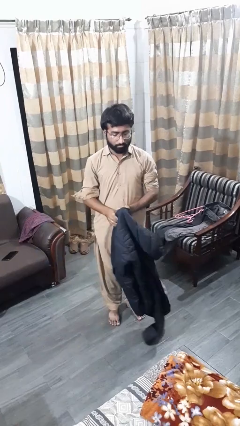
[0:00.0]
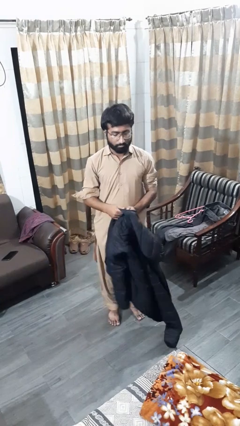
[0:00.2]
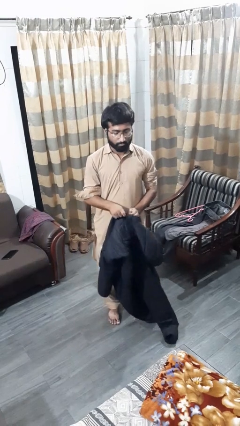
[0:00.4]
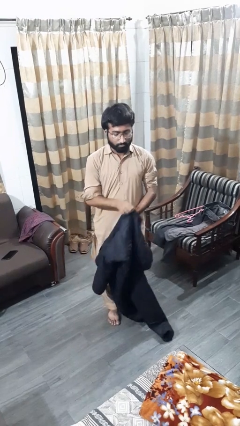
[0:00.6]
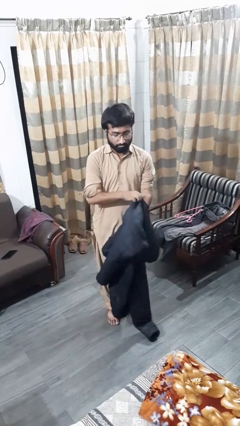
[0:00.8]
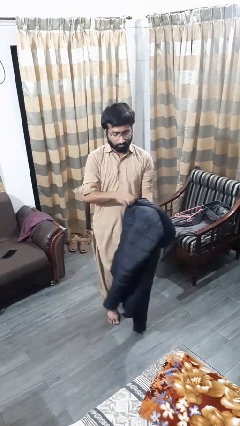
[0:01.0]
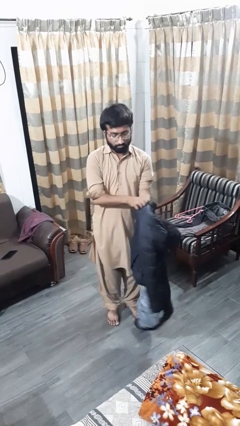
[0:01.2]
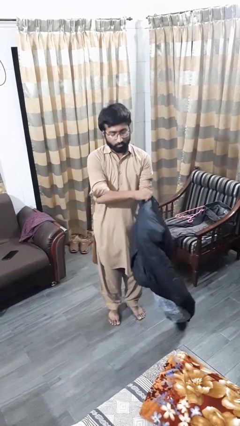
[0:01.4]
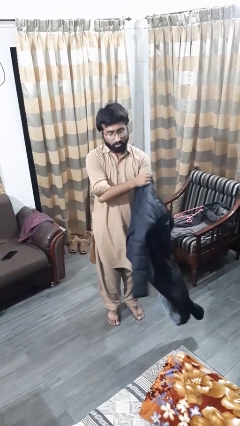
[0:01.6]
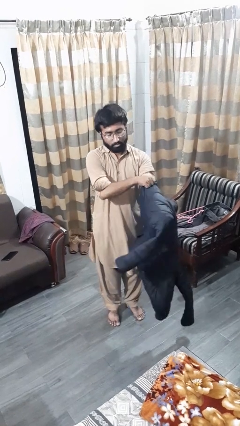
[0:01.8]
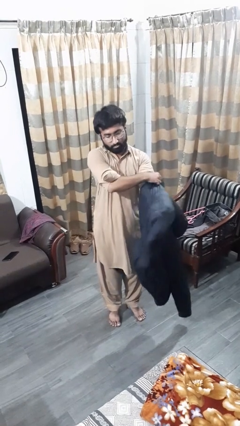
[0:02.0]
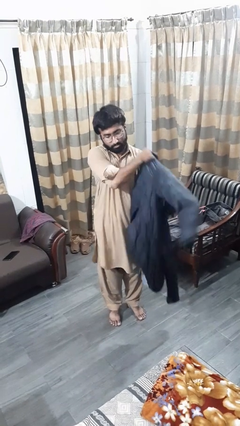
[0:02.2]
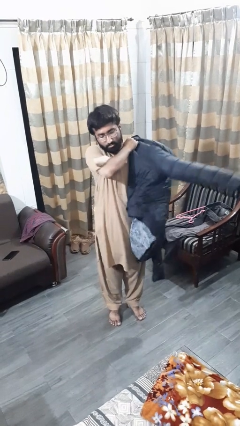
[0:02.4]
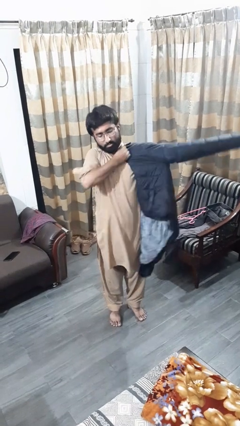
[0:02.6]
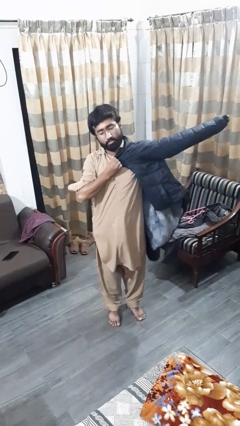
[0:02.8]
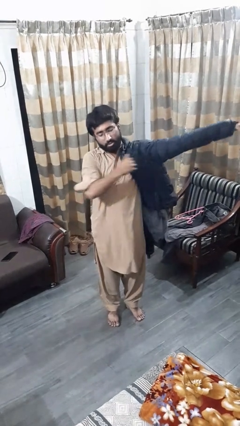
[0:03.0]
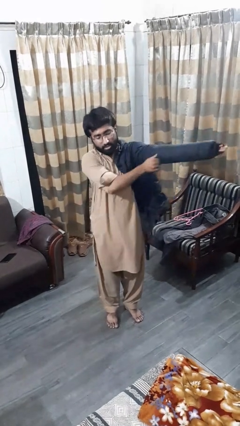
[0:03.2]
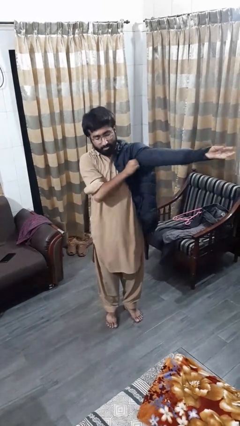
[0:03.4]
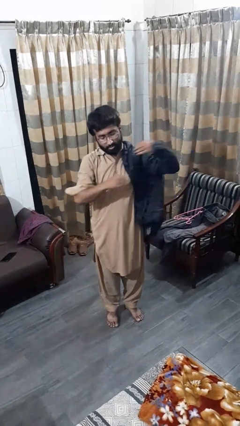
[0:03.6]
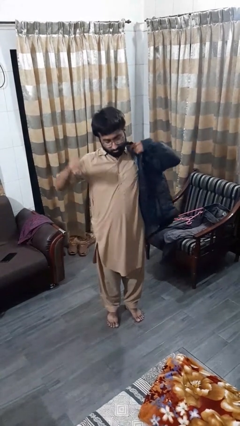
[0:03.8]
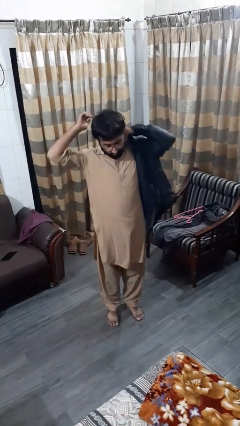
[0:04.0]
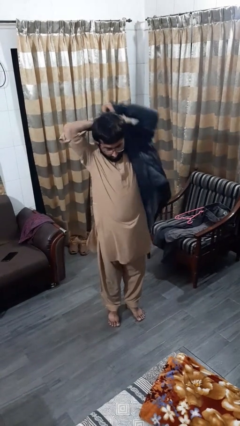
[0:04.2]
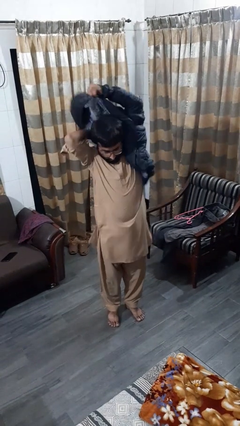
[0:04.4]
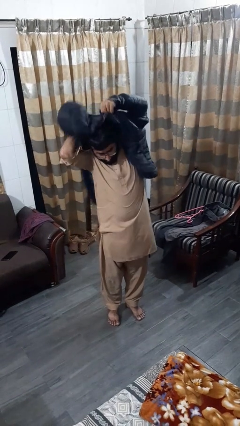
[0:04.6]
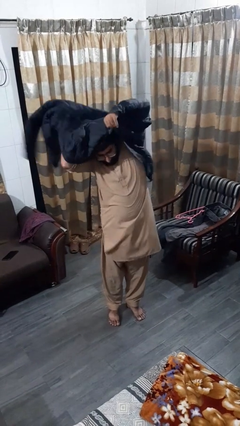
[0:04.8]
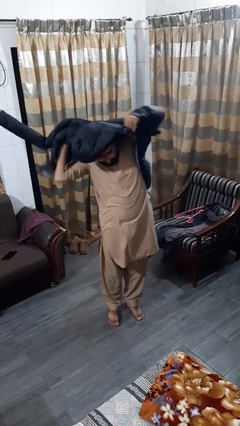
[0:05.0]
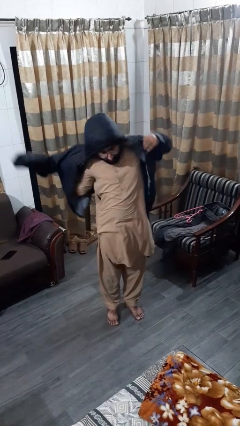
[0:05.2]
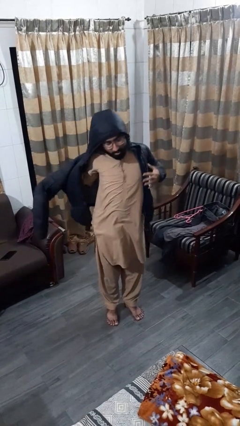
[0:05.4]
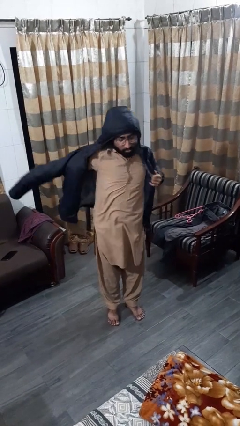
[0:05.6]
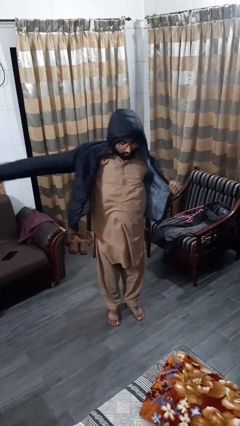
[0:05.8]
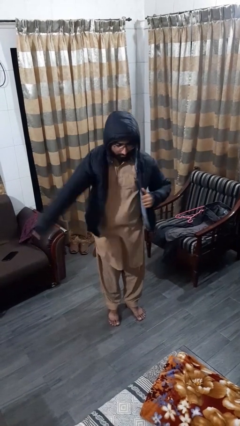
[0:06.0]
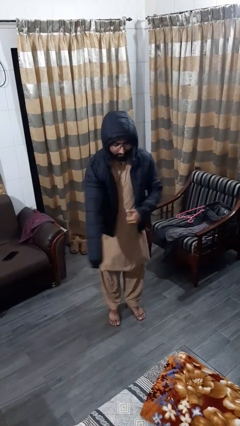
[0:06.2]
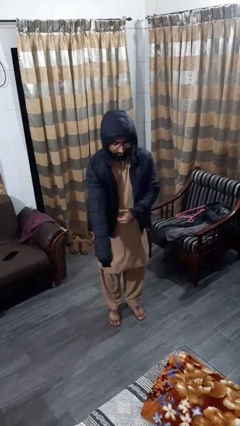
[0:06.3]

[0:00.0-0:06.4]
person puts on hoodie

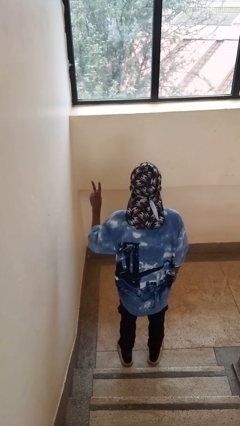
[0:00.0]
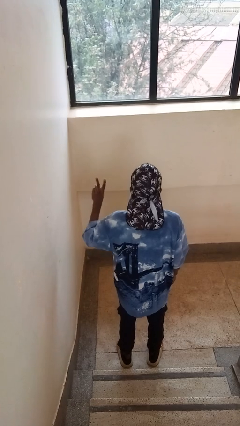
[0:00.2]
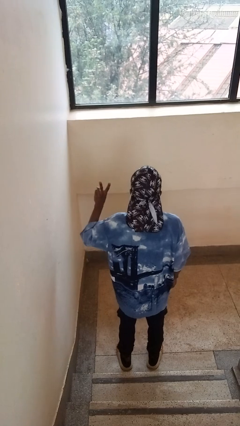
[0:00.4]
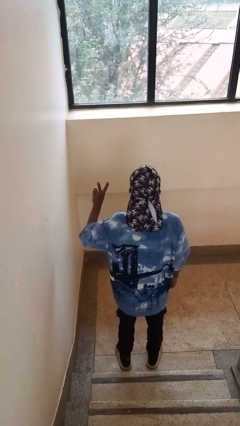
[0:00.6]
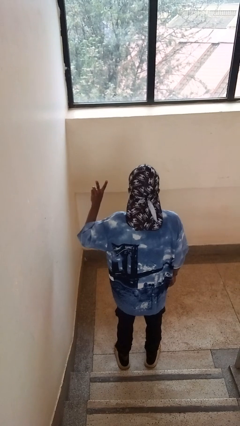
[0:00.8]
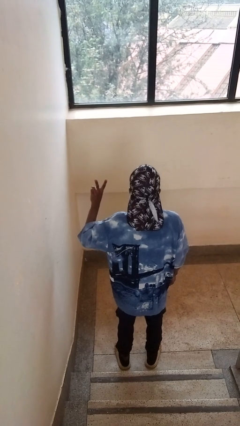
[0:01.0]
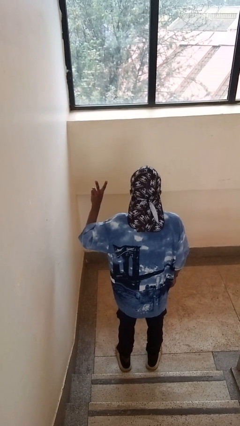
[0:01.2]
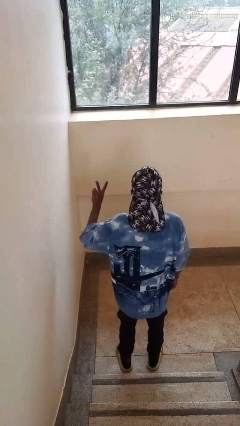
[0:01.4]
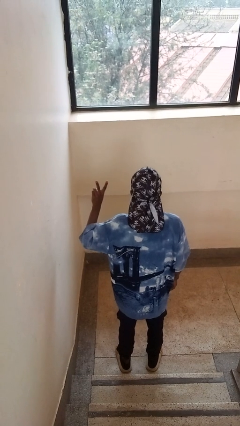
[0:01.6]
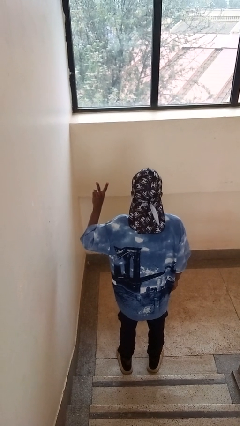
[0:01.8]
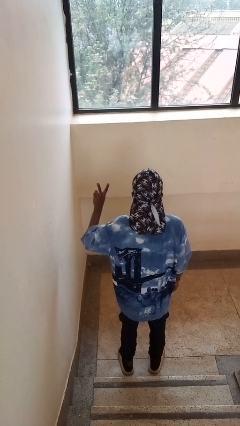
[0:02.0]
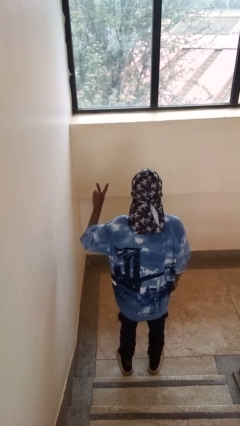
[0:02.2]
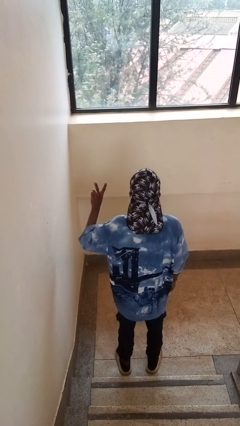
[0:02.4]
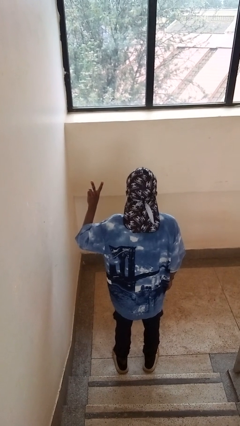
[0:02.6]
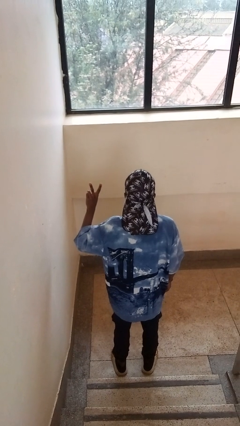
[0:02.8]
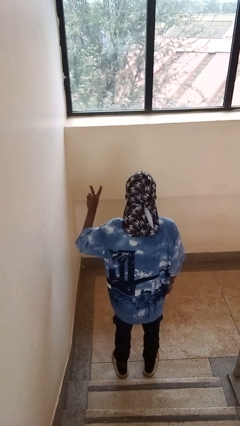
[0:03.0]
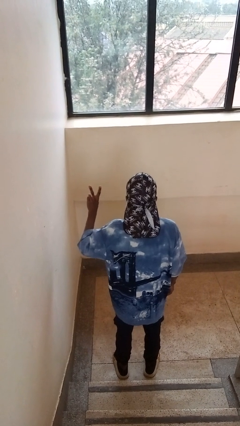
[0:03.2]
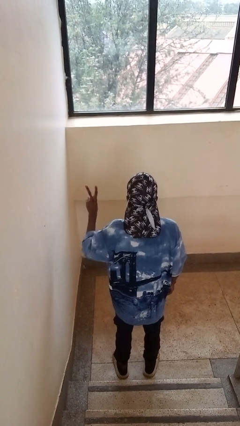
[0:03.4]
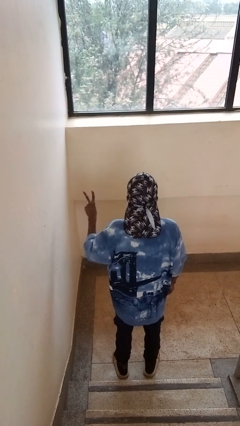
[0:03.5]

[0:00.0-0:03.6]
person gestures peace

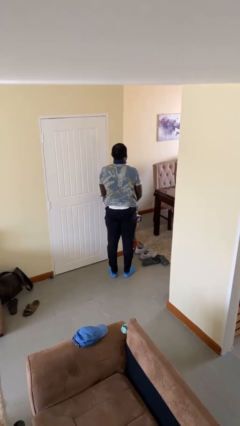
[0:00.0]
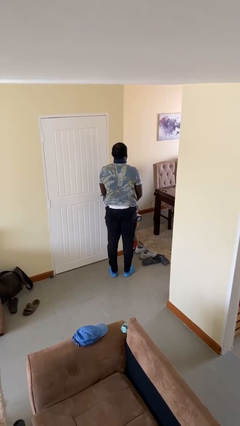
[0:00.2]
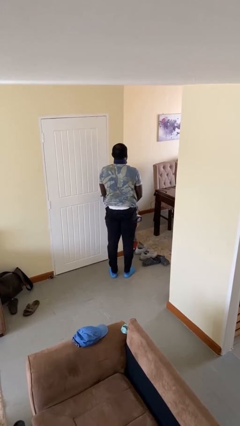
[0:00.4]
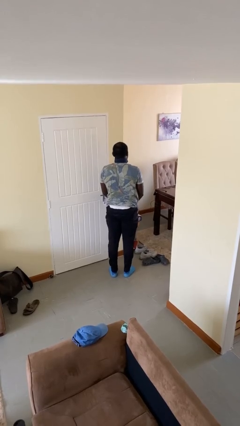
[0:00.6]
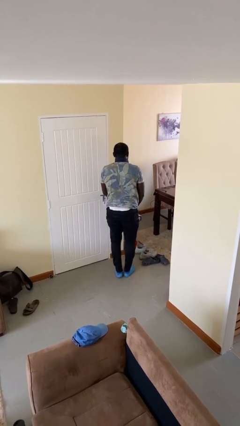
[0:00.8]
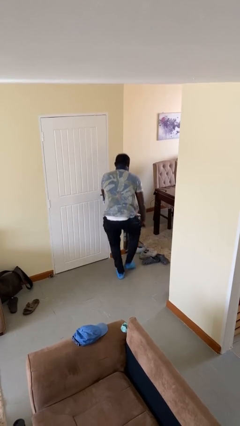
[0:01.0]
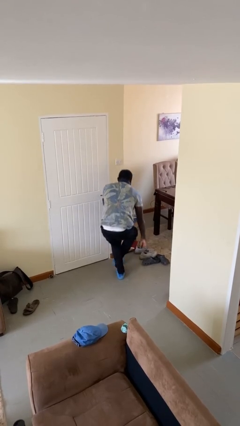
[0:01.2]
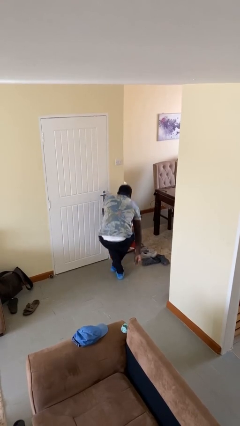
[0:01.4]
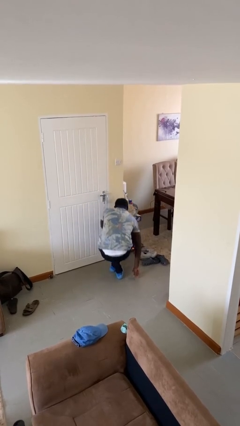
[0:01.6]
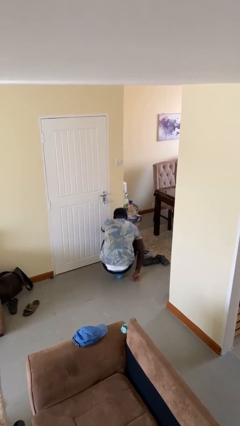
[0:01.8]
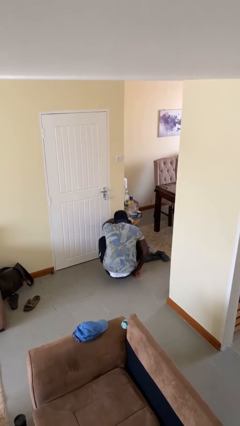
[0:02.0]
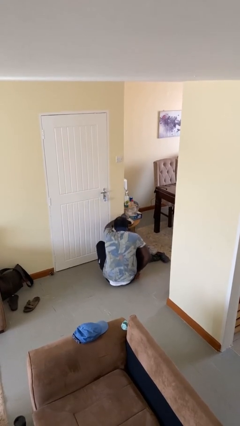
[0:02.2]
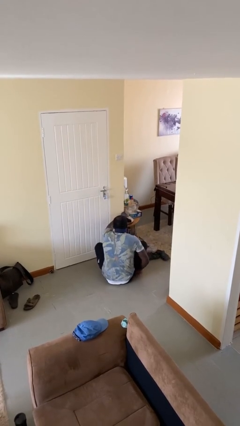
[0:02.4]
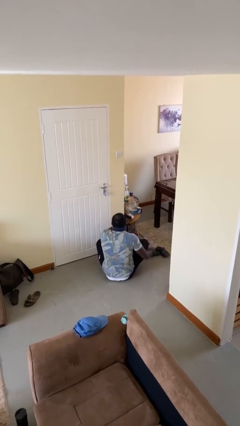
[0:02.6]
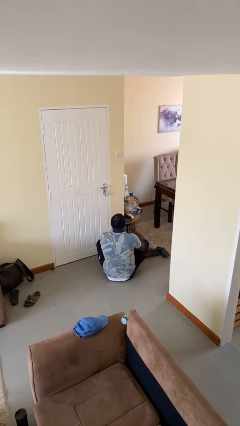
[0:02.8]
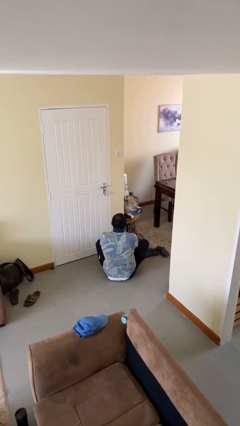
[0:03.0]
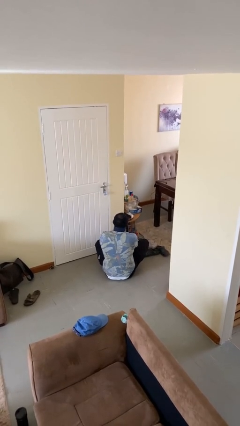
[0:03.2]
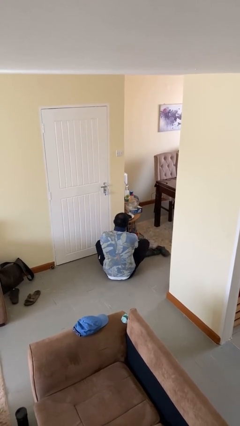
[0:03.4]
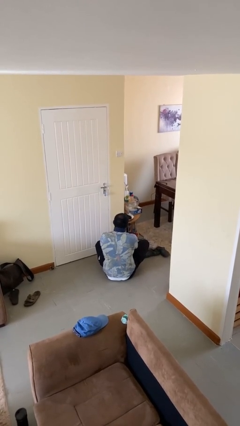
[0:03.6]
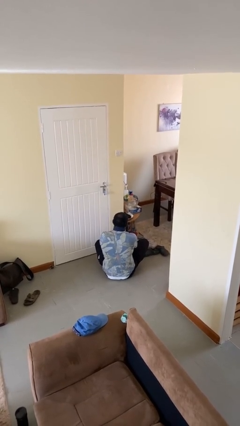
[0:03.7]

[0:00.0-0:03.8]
person sits crisscross

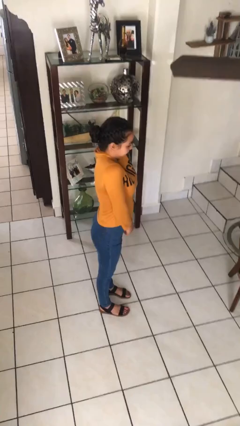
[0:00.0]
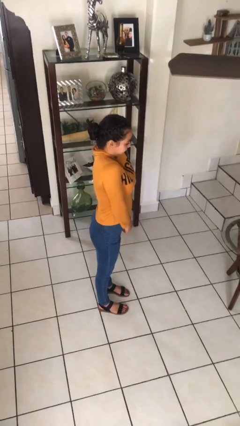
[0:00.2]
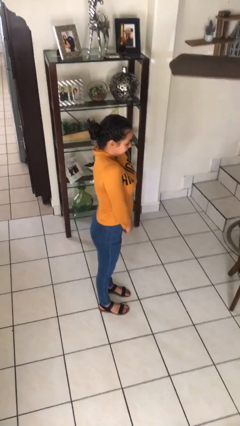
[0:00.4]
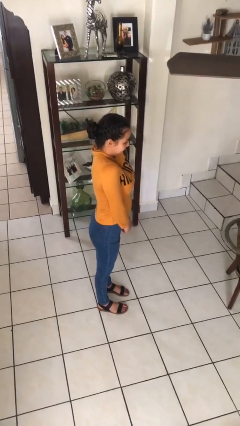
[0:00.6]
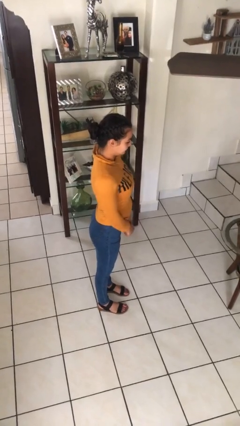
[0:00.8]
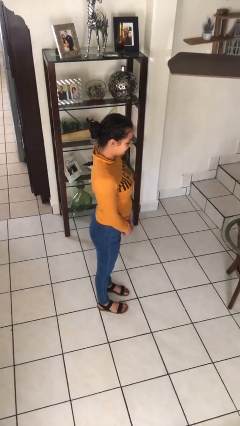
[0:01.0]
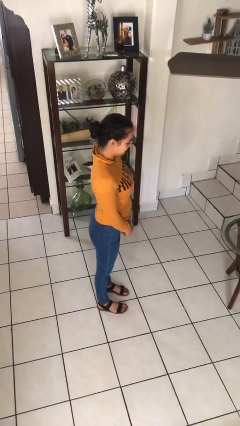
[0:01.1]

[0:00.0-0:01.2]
person shrugs

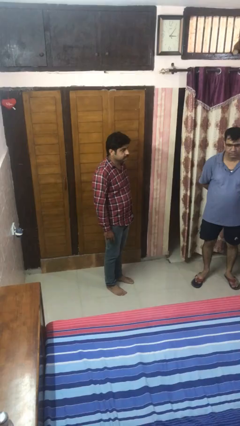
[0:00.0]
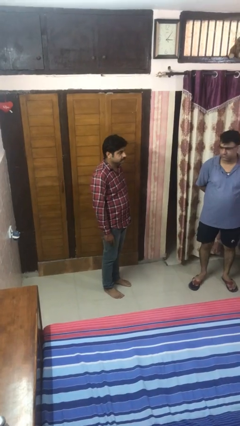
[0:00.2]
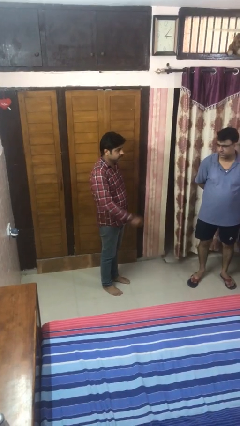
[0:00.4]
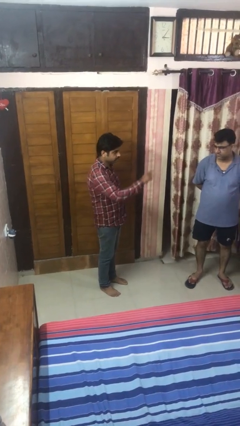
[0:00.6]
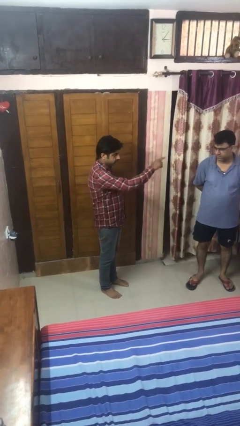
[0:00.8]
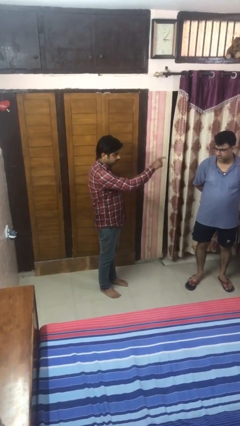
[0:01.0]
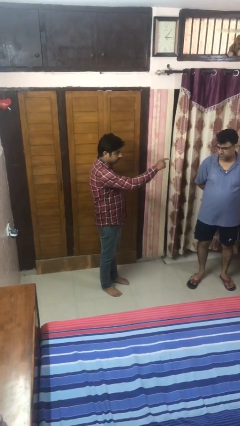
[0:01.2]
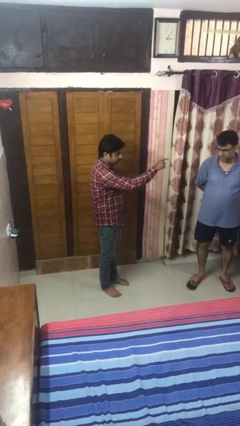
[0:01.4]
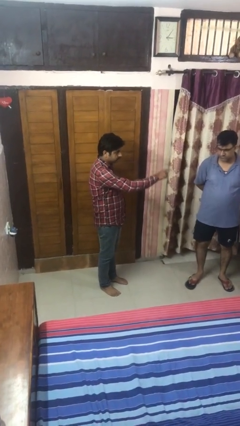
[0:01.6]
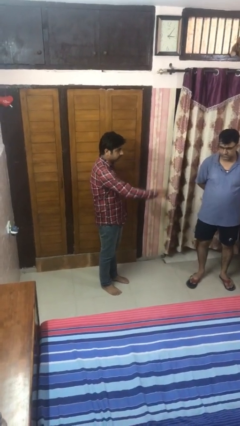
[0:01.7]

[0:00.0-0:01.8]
person points at person

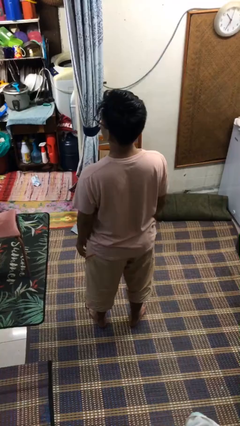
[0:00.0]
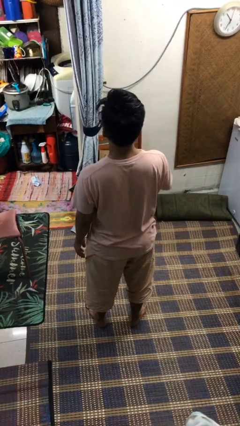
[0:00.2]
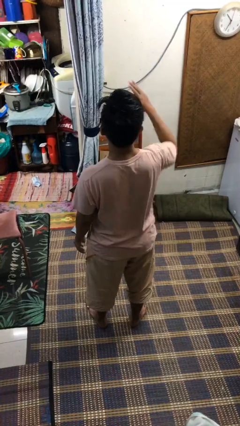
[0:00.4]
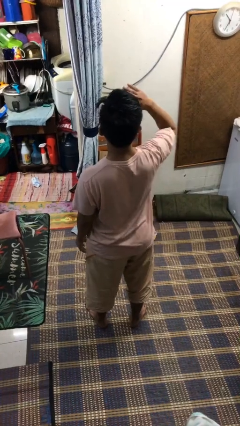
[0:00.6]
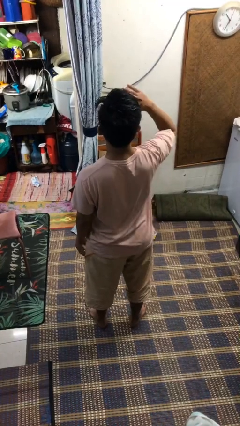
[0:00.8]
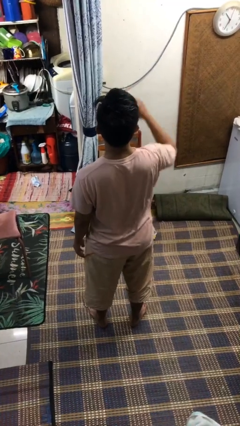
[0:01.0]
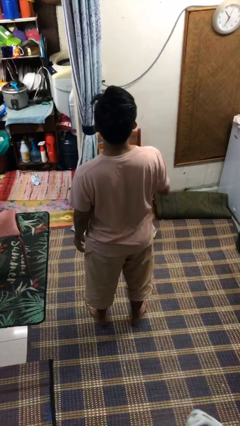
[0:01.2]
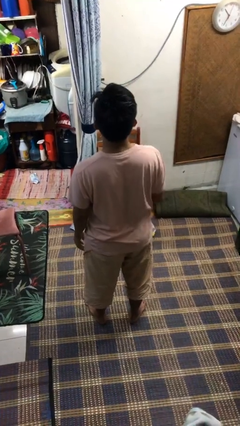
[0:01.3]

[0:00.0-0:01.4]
person salutes
